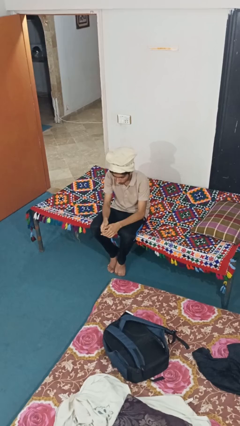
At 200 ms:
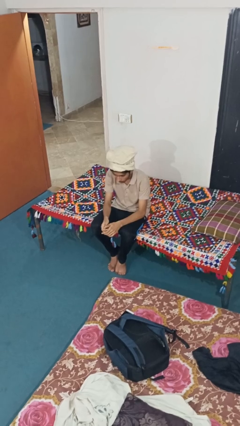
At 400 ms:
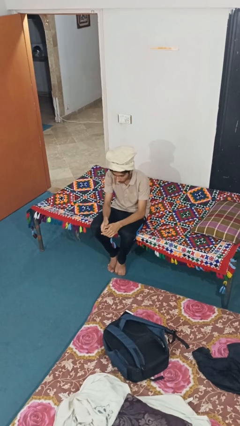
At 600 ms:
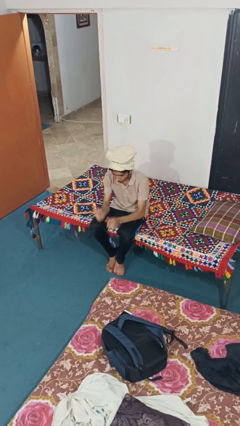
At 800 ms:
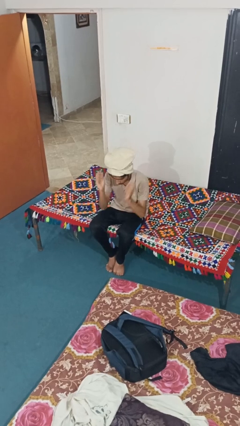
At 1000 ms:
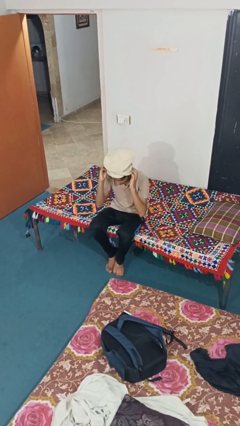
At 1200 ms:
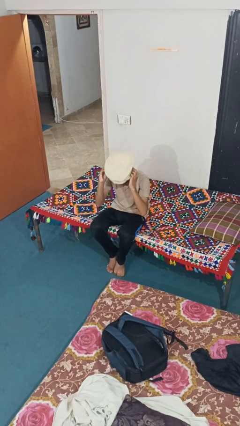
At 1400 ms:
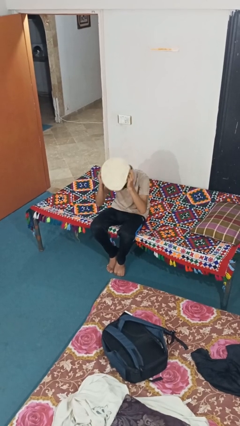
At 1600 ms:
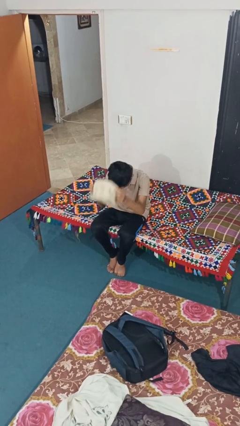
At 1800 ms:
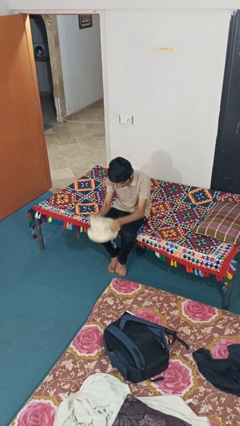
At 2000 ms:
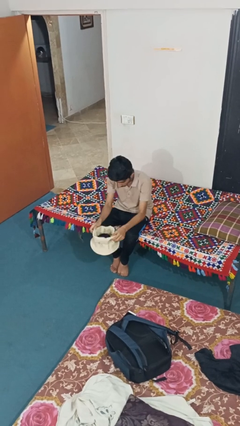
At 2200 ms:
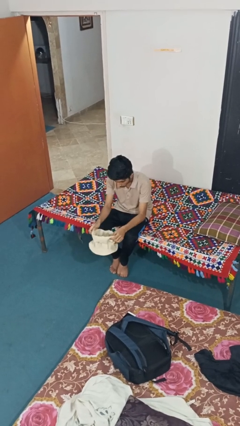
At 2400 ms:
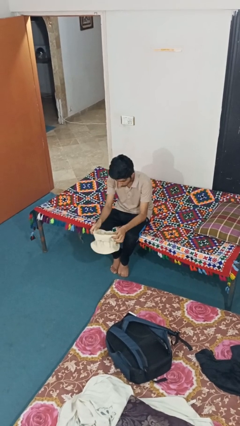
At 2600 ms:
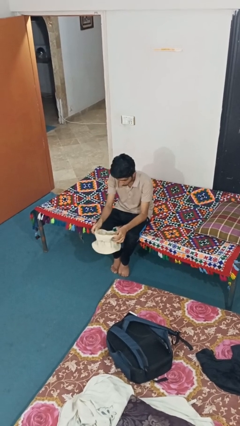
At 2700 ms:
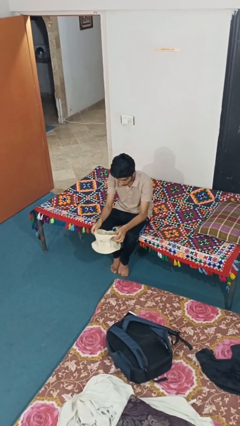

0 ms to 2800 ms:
person takes off hat

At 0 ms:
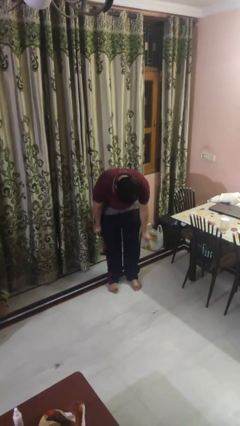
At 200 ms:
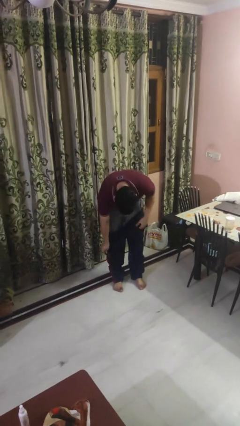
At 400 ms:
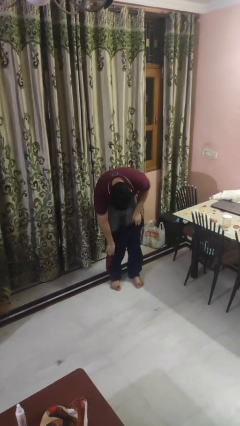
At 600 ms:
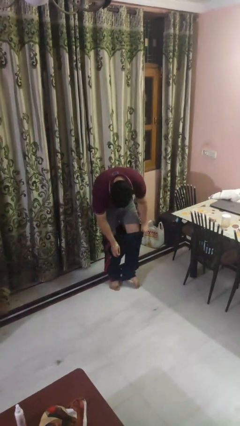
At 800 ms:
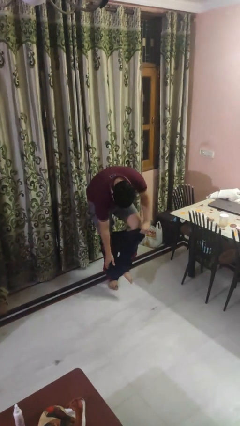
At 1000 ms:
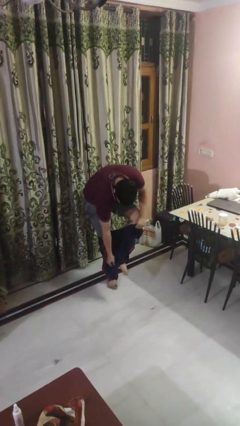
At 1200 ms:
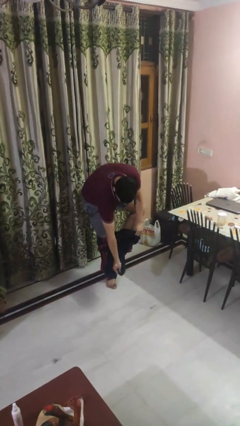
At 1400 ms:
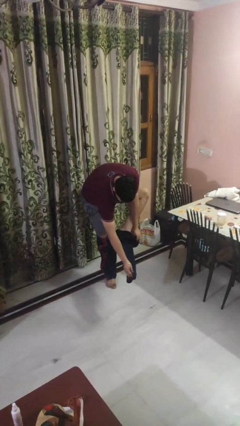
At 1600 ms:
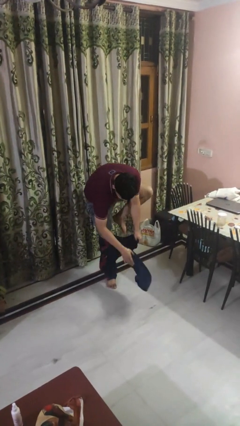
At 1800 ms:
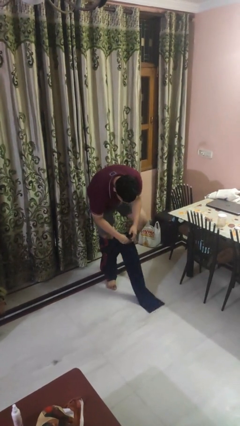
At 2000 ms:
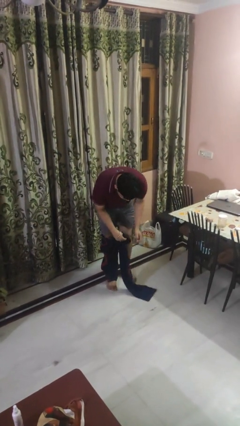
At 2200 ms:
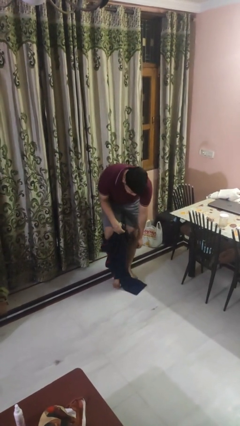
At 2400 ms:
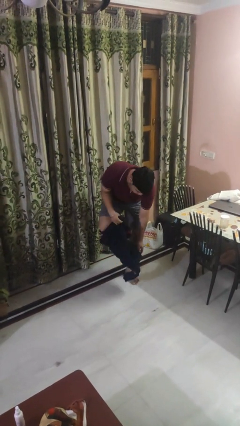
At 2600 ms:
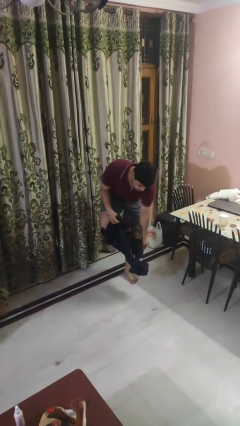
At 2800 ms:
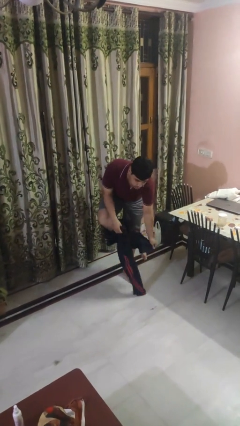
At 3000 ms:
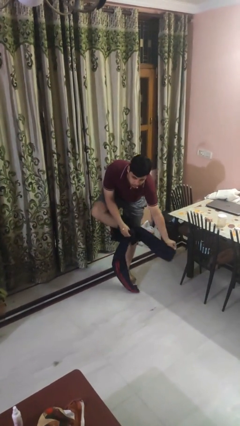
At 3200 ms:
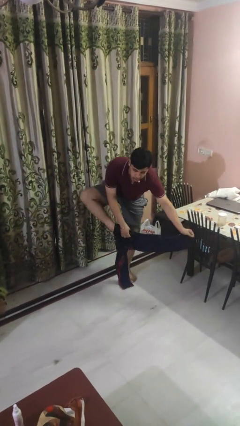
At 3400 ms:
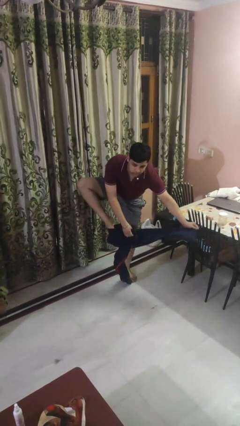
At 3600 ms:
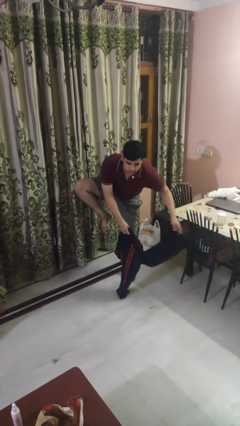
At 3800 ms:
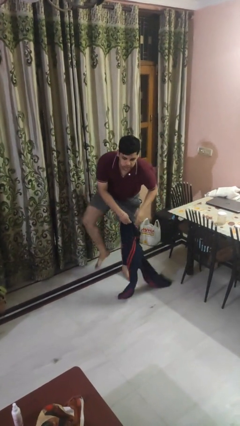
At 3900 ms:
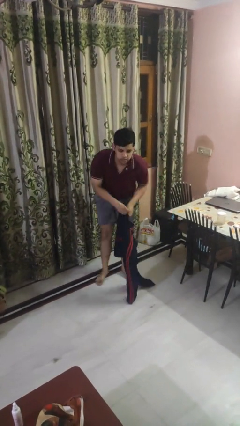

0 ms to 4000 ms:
person takes off pants

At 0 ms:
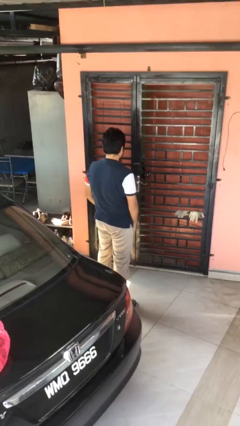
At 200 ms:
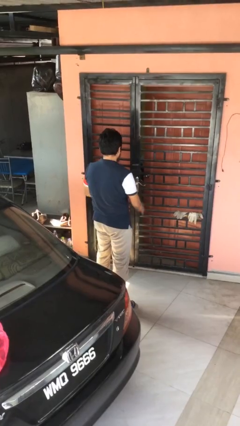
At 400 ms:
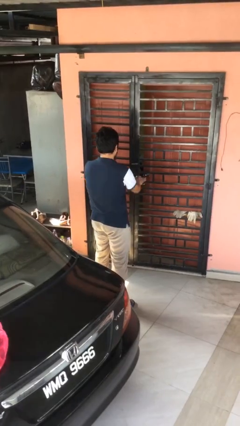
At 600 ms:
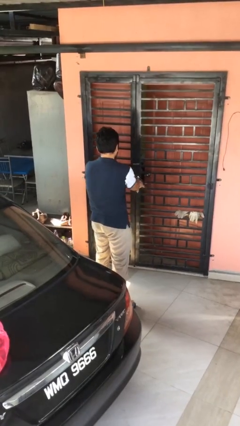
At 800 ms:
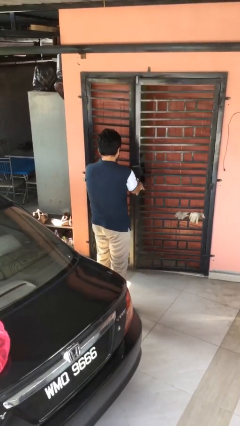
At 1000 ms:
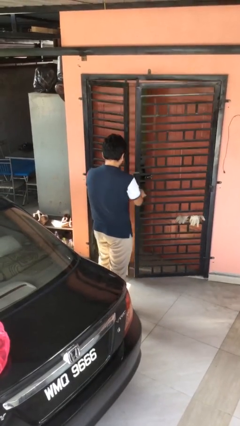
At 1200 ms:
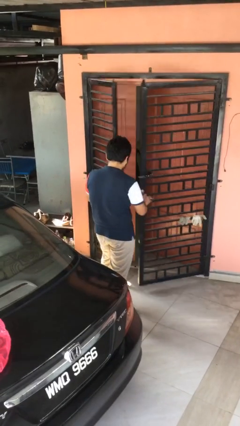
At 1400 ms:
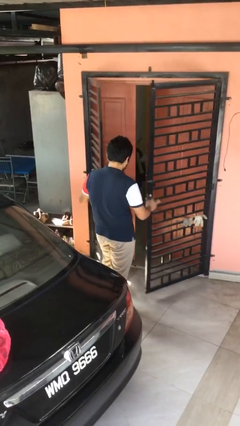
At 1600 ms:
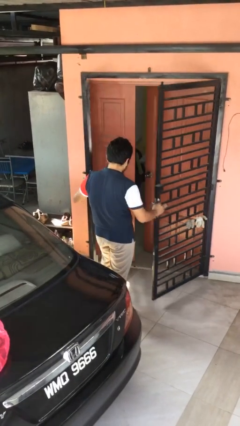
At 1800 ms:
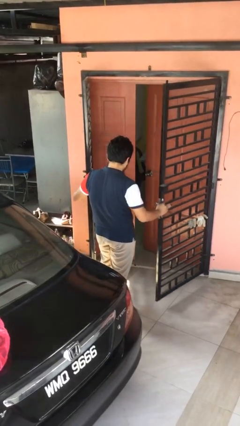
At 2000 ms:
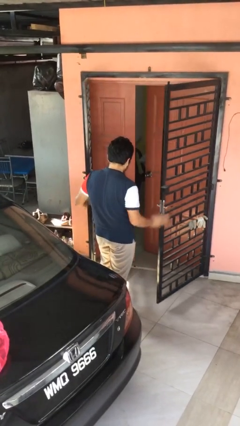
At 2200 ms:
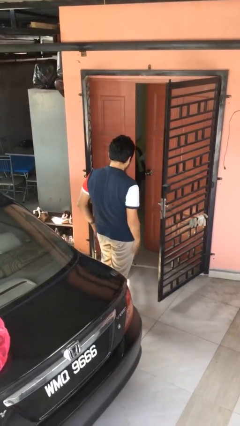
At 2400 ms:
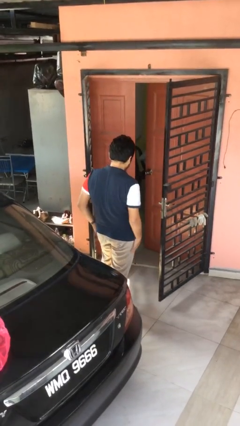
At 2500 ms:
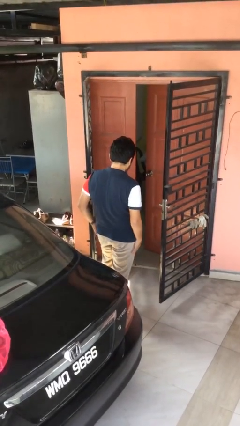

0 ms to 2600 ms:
person opens gate

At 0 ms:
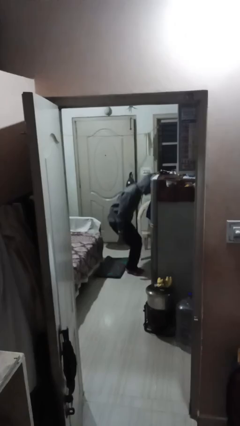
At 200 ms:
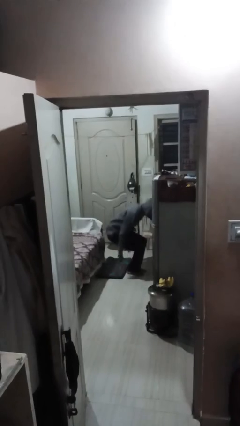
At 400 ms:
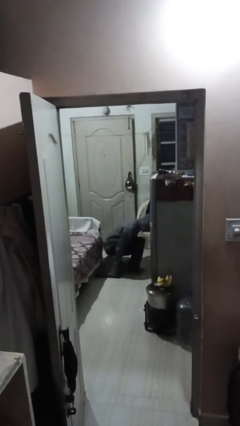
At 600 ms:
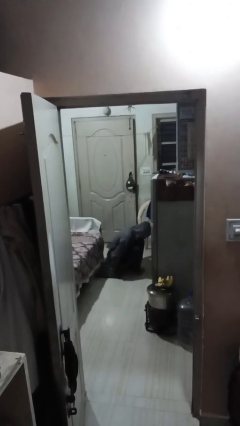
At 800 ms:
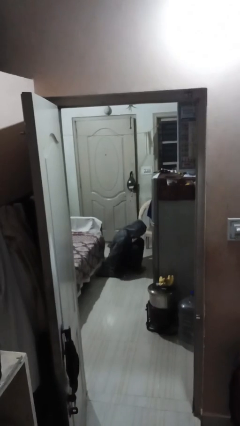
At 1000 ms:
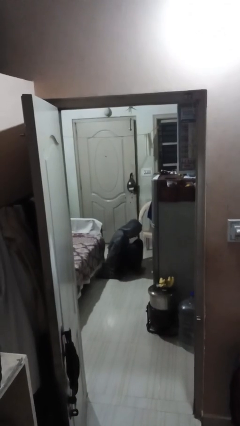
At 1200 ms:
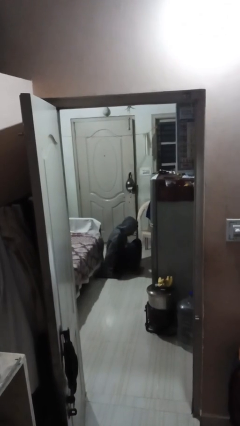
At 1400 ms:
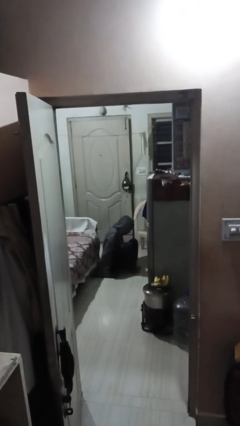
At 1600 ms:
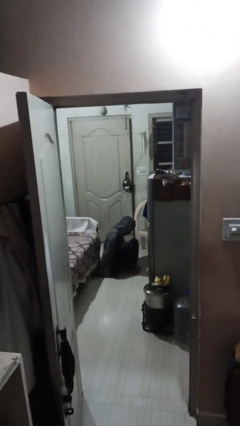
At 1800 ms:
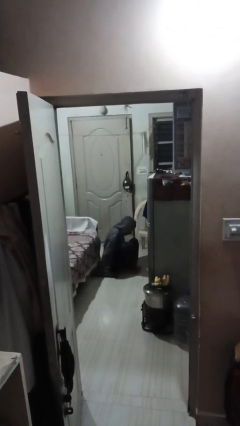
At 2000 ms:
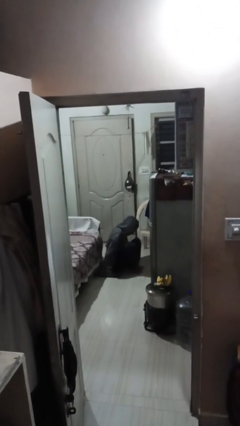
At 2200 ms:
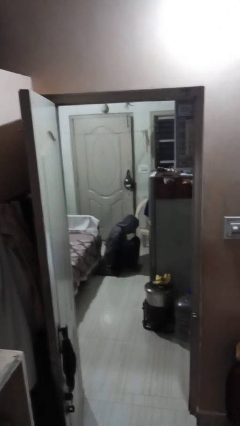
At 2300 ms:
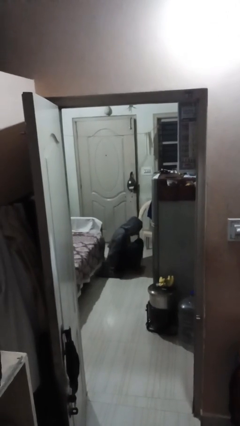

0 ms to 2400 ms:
person sits down

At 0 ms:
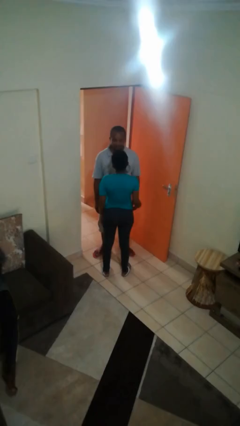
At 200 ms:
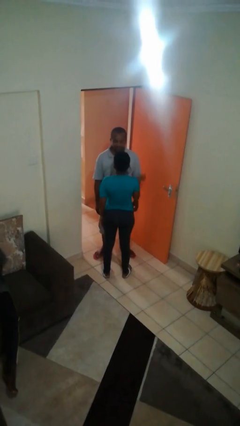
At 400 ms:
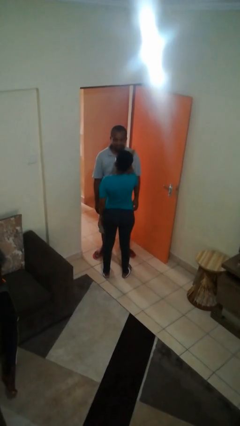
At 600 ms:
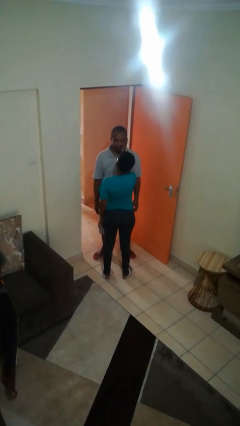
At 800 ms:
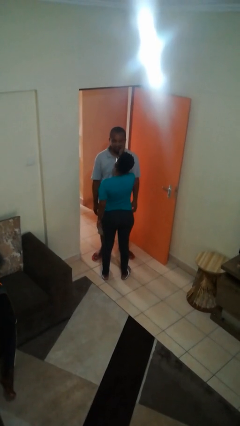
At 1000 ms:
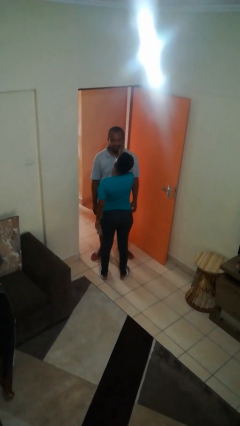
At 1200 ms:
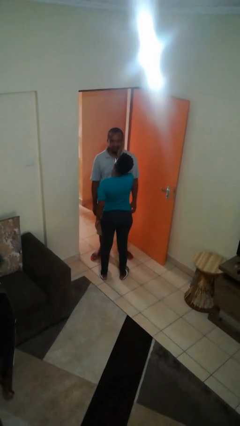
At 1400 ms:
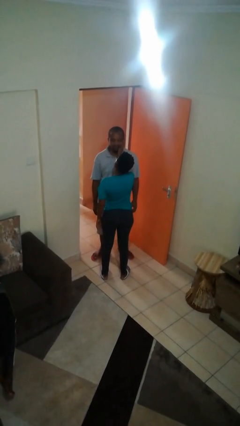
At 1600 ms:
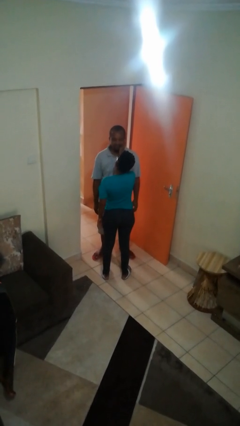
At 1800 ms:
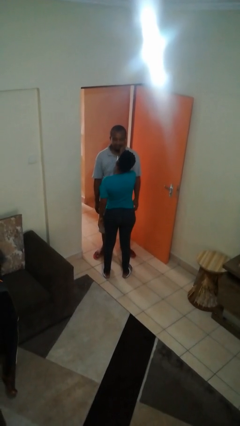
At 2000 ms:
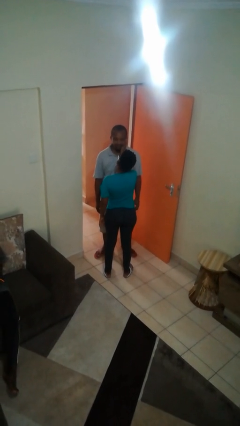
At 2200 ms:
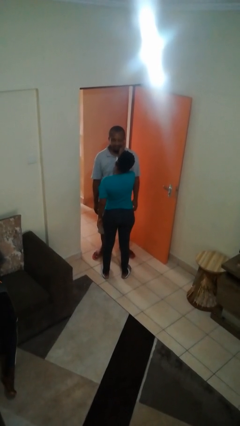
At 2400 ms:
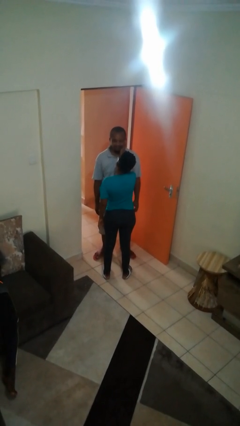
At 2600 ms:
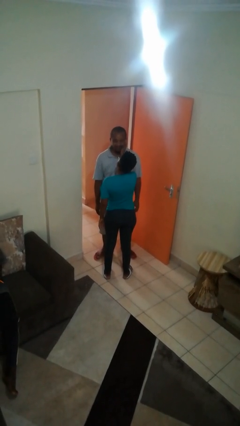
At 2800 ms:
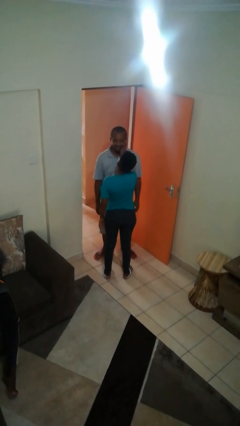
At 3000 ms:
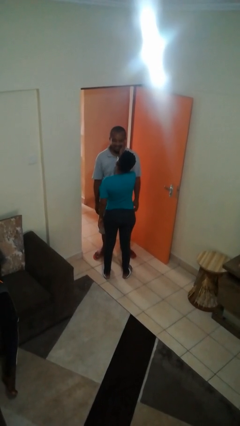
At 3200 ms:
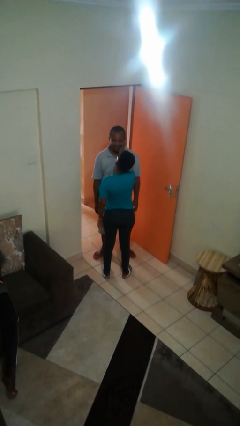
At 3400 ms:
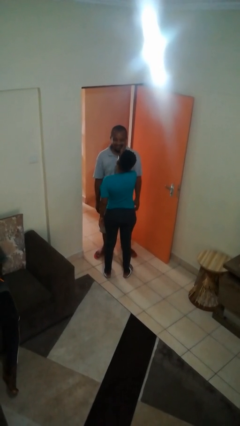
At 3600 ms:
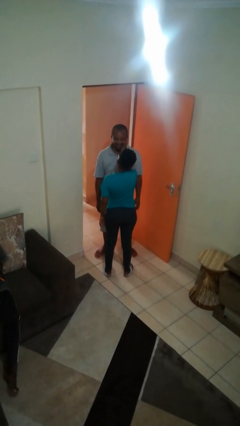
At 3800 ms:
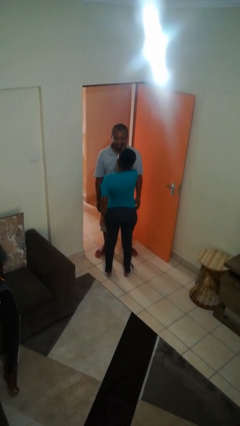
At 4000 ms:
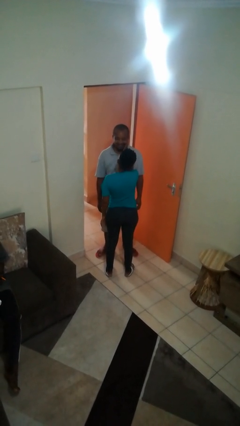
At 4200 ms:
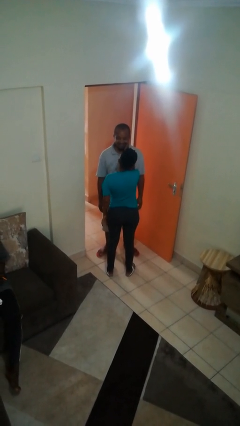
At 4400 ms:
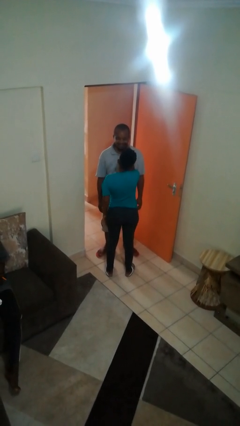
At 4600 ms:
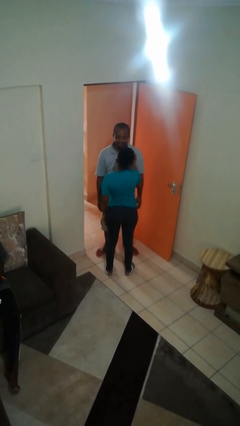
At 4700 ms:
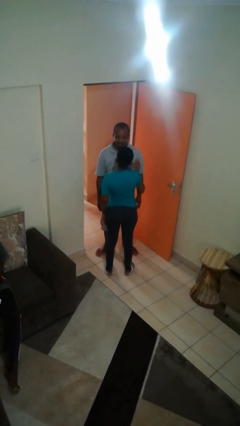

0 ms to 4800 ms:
person touches face of person

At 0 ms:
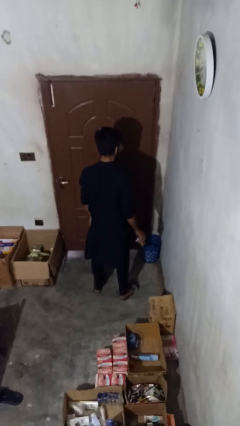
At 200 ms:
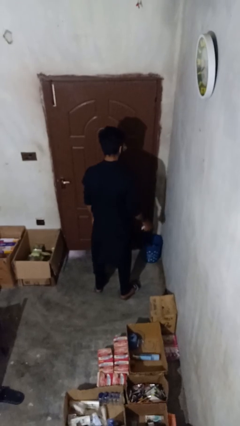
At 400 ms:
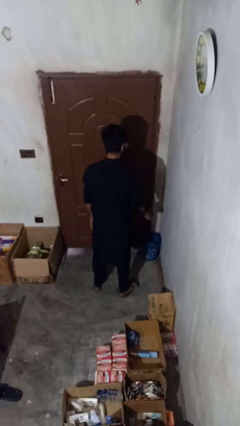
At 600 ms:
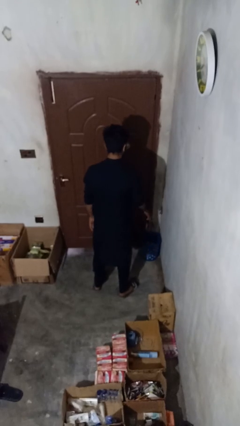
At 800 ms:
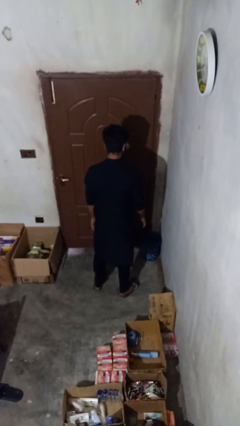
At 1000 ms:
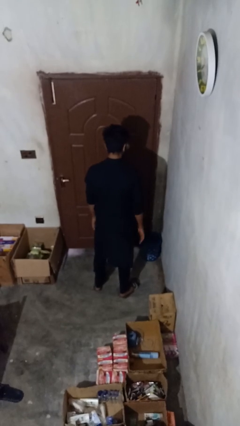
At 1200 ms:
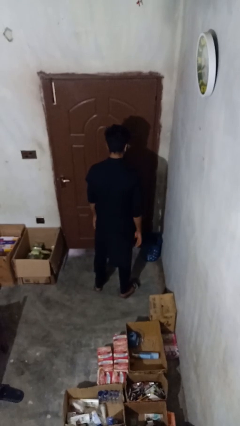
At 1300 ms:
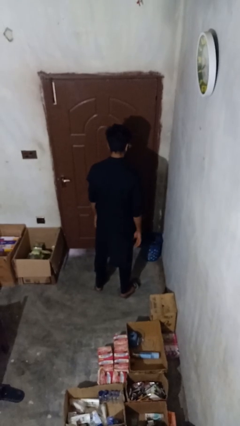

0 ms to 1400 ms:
person discards trash
